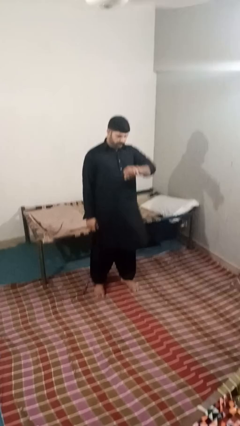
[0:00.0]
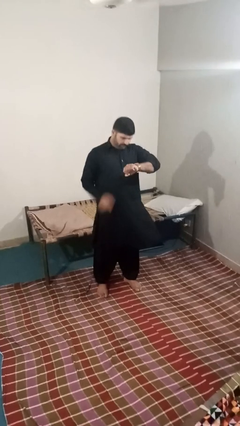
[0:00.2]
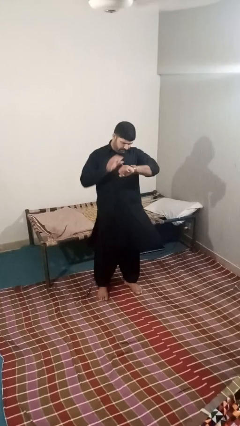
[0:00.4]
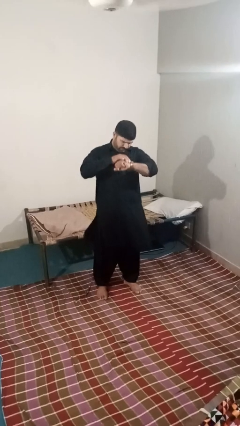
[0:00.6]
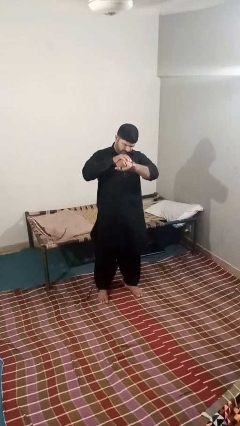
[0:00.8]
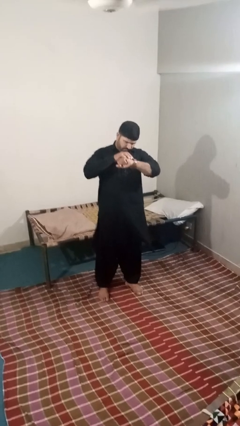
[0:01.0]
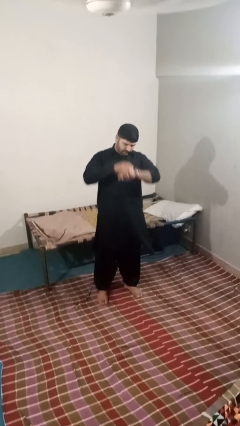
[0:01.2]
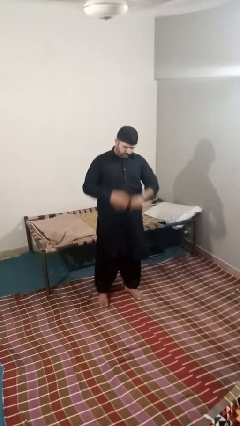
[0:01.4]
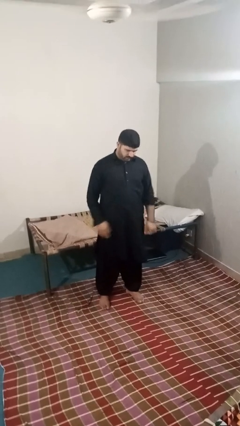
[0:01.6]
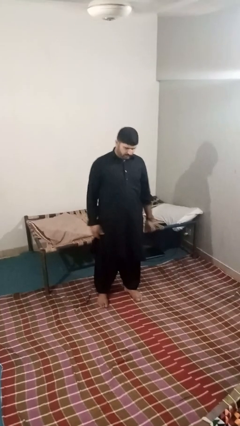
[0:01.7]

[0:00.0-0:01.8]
person looks at wristwatch

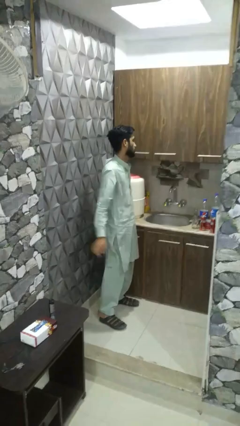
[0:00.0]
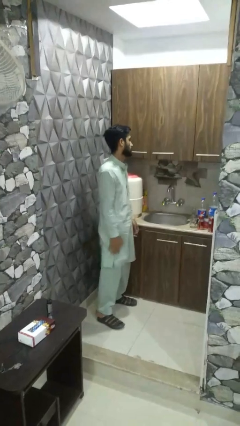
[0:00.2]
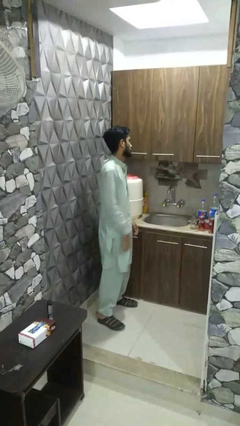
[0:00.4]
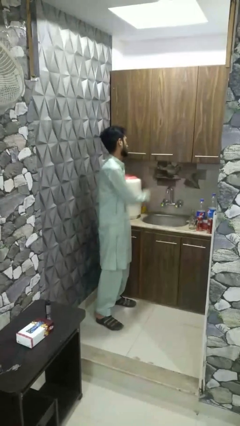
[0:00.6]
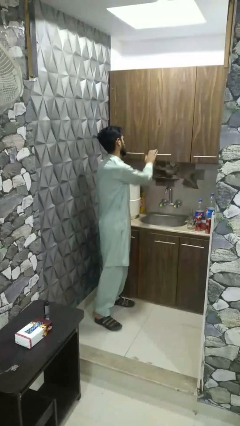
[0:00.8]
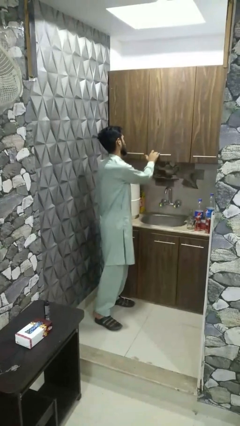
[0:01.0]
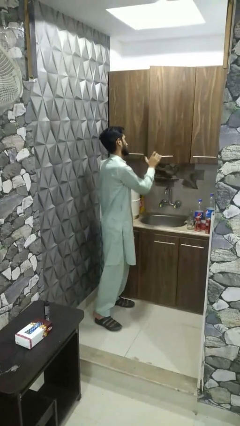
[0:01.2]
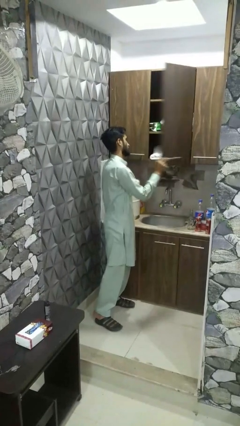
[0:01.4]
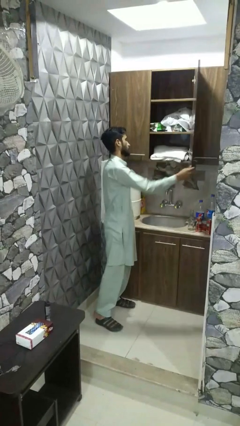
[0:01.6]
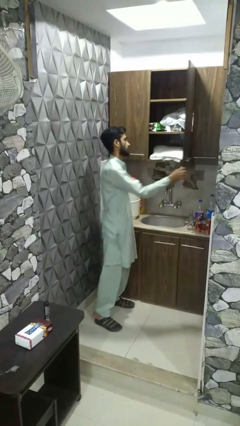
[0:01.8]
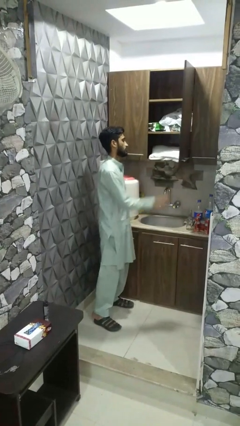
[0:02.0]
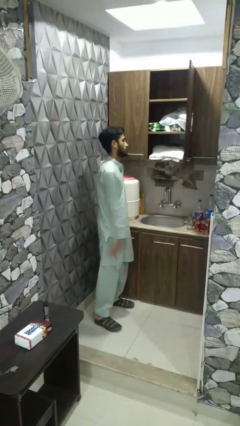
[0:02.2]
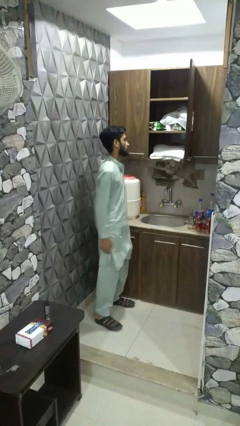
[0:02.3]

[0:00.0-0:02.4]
person opens dresser drawer

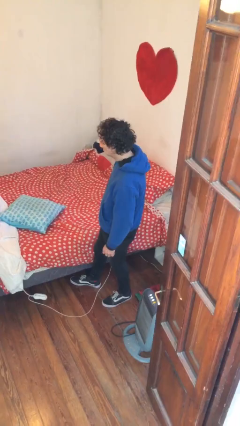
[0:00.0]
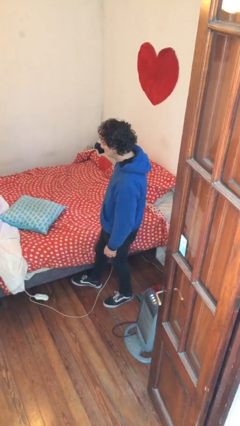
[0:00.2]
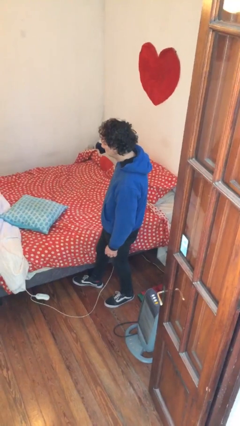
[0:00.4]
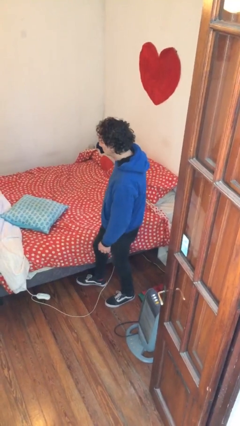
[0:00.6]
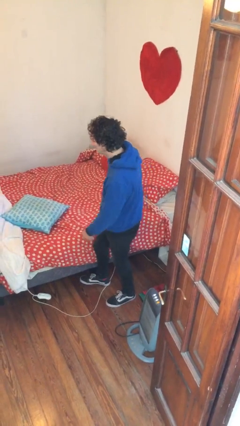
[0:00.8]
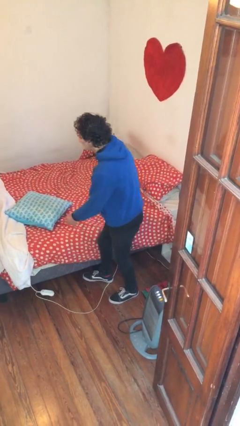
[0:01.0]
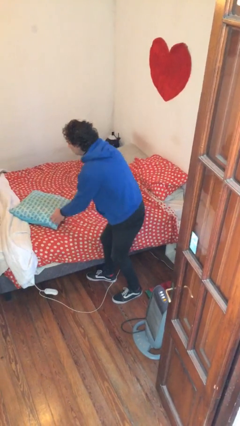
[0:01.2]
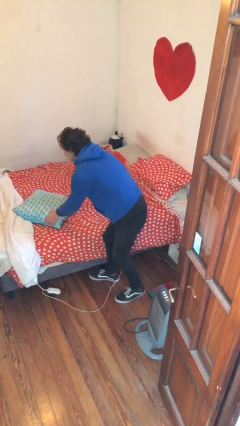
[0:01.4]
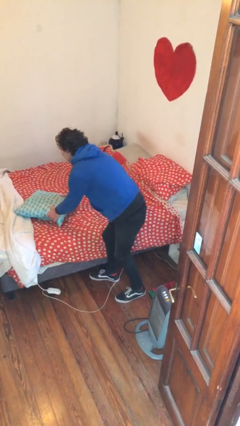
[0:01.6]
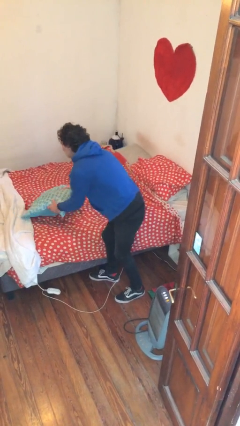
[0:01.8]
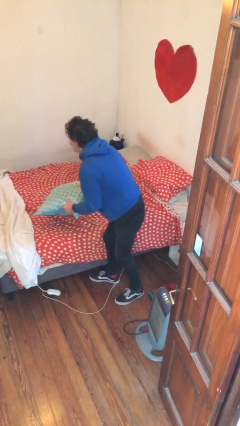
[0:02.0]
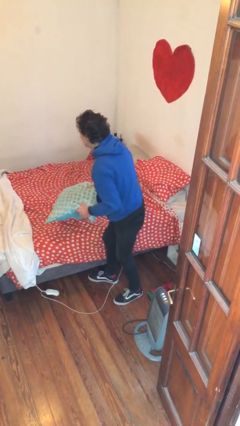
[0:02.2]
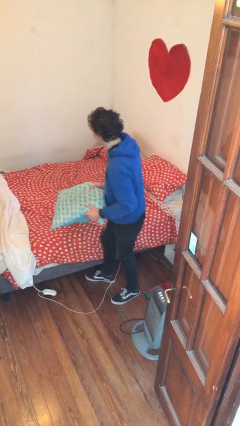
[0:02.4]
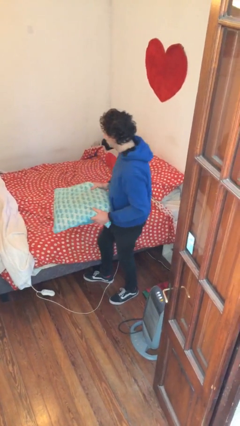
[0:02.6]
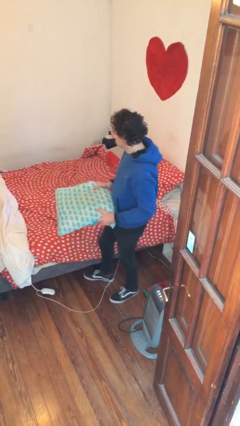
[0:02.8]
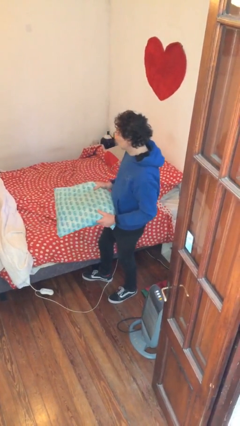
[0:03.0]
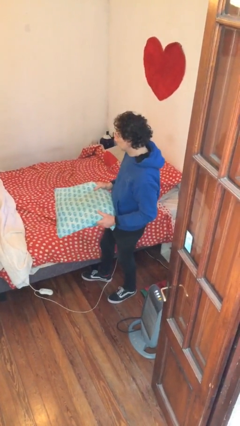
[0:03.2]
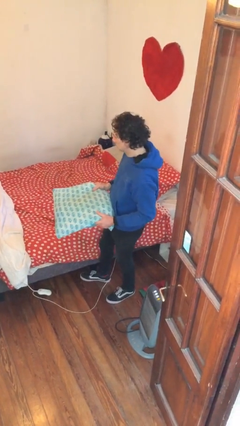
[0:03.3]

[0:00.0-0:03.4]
person picks up object from bed

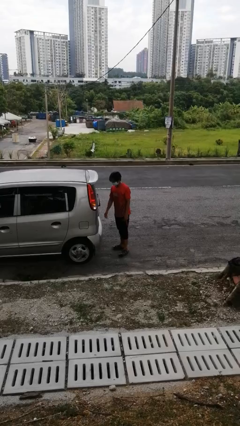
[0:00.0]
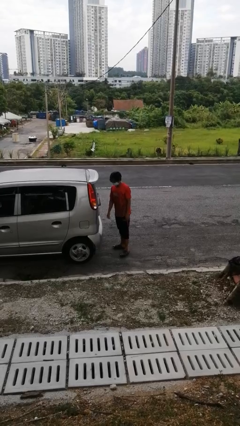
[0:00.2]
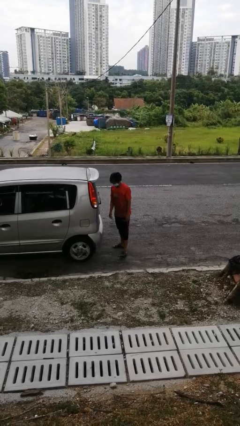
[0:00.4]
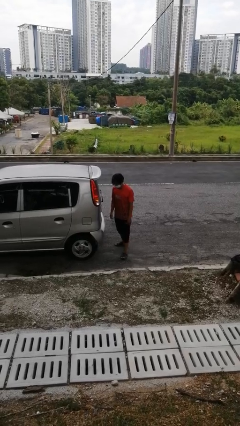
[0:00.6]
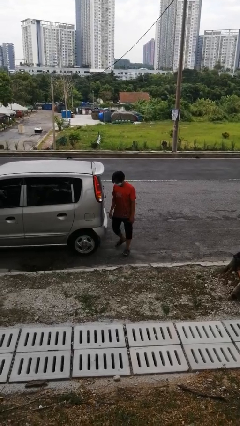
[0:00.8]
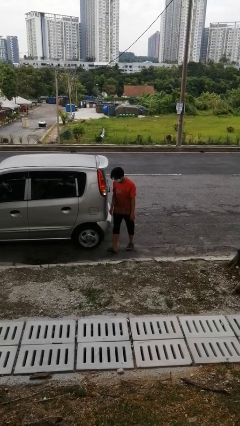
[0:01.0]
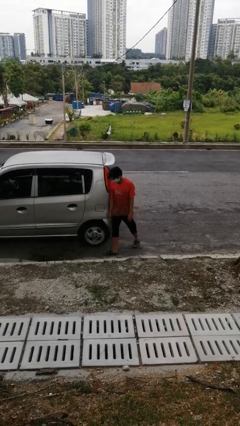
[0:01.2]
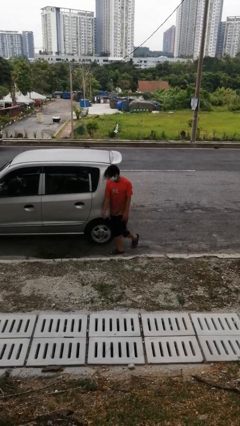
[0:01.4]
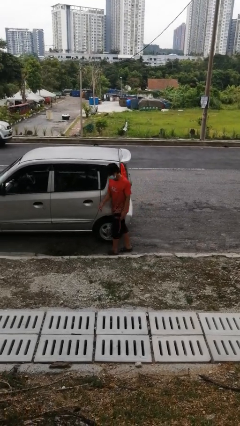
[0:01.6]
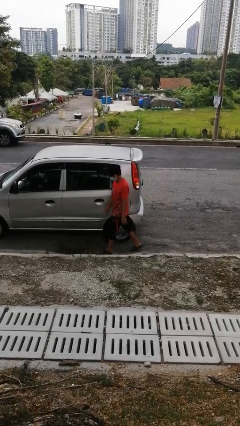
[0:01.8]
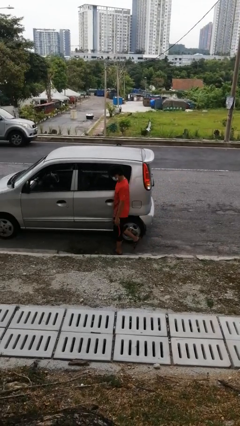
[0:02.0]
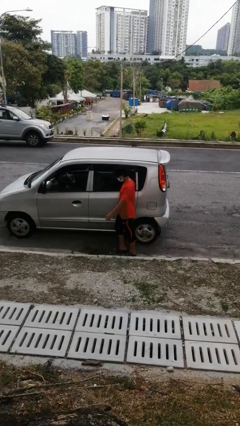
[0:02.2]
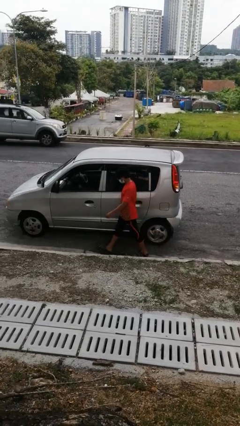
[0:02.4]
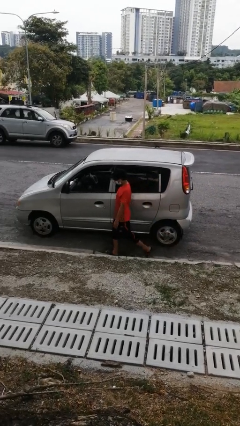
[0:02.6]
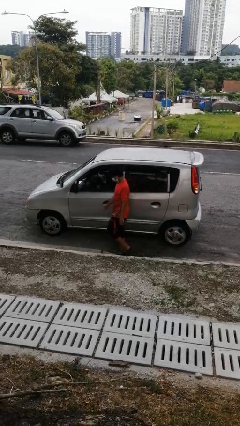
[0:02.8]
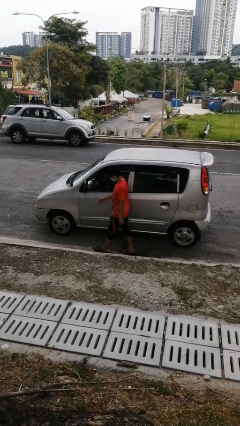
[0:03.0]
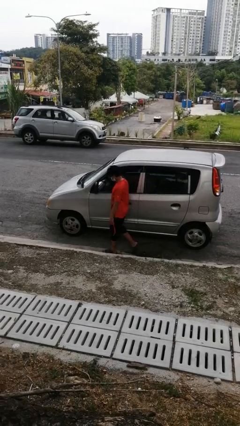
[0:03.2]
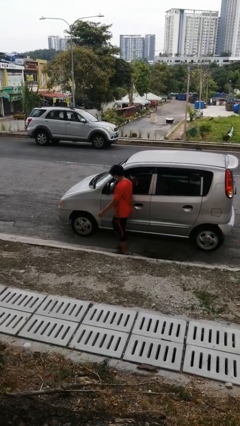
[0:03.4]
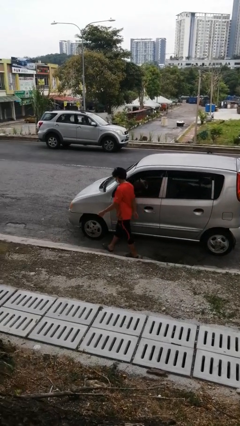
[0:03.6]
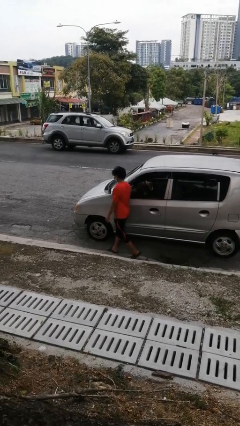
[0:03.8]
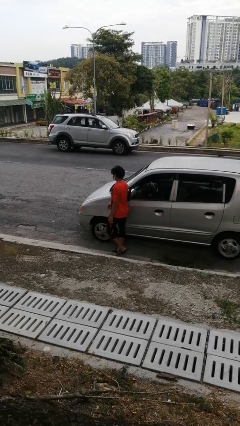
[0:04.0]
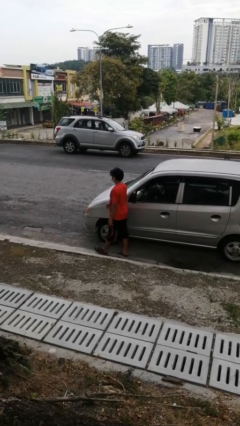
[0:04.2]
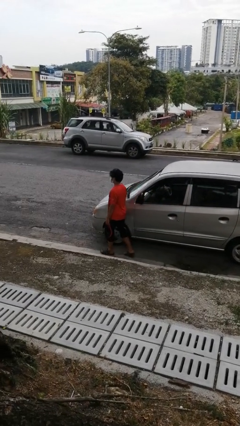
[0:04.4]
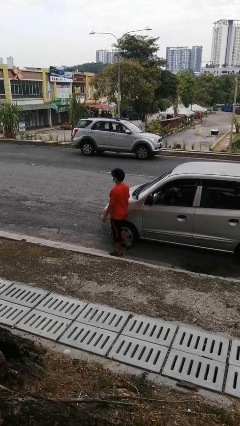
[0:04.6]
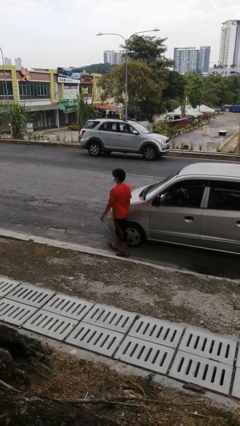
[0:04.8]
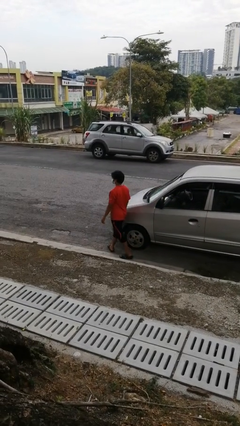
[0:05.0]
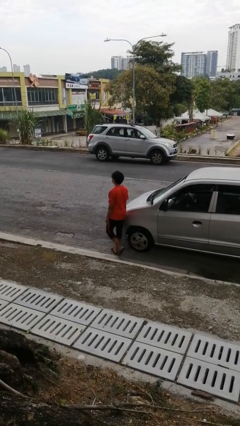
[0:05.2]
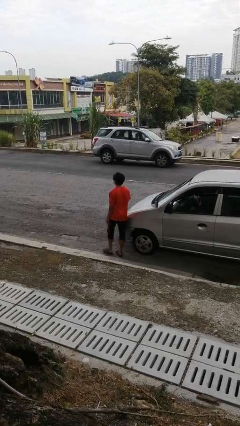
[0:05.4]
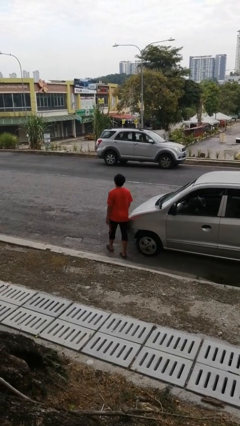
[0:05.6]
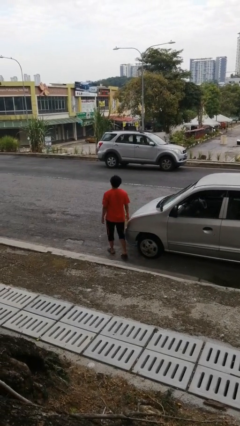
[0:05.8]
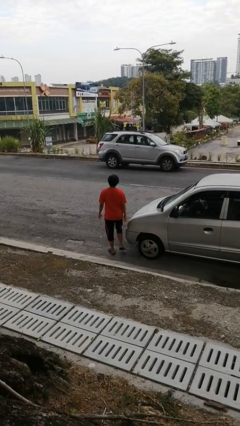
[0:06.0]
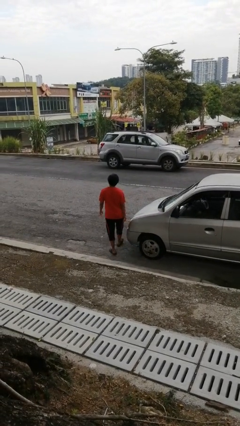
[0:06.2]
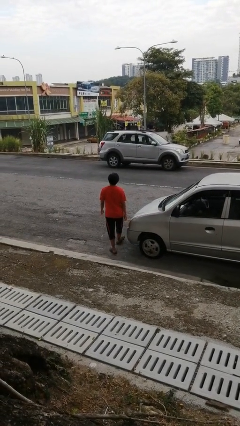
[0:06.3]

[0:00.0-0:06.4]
person walks around car

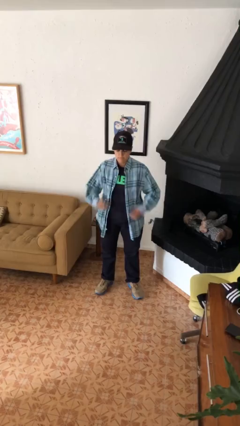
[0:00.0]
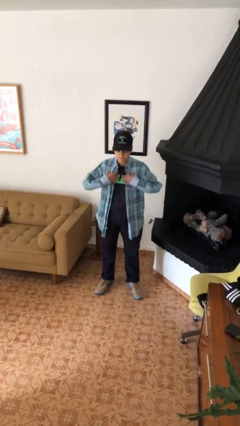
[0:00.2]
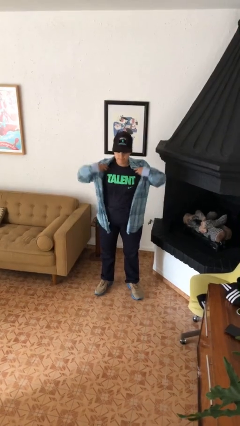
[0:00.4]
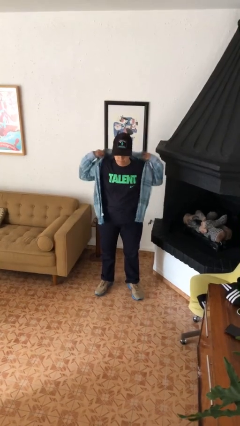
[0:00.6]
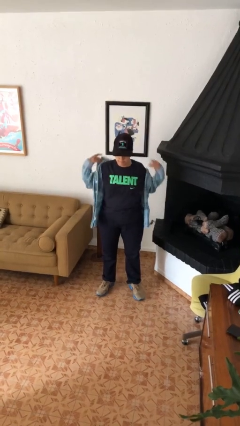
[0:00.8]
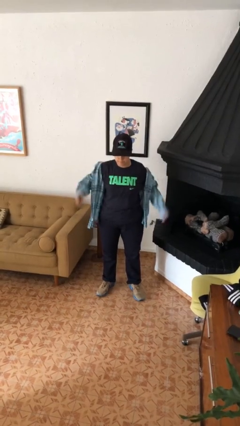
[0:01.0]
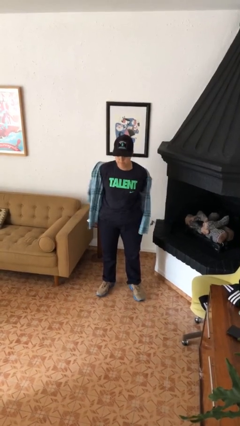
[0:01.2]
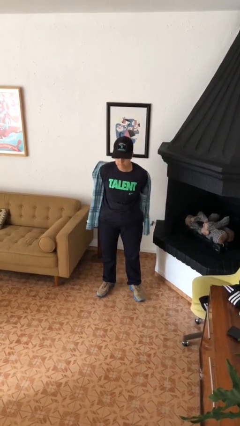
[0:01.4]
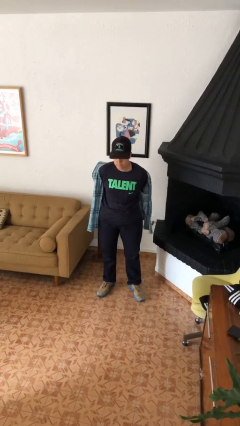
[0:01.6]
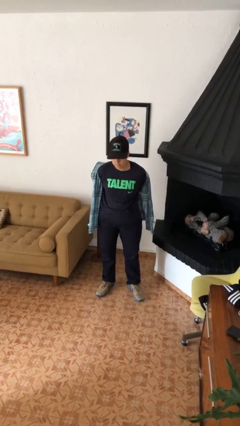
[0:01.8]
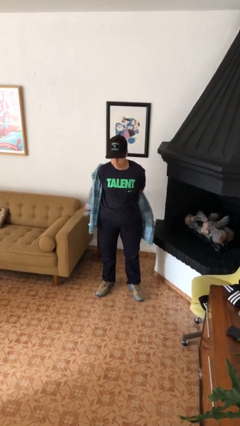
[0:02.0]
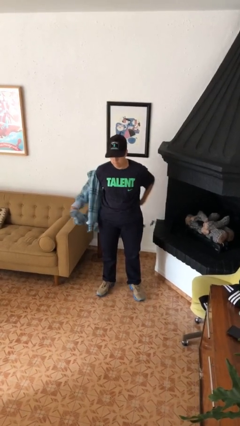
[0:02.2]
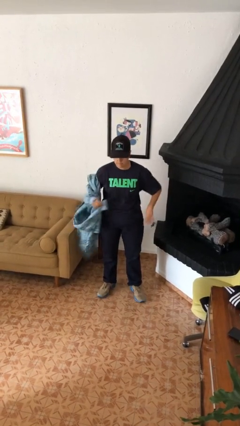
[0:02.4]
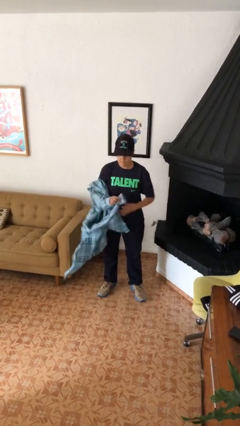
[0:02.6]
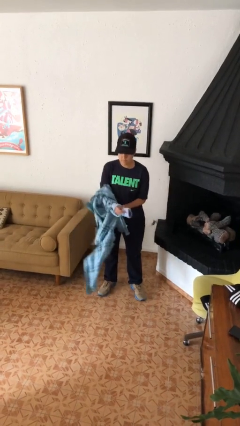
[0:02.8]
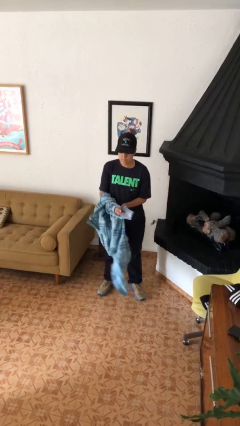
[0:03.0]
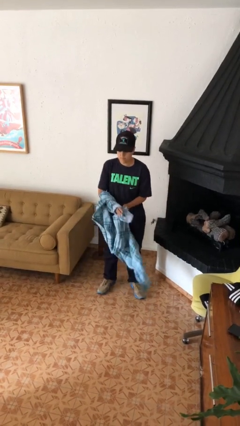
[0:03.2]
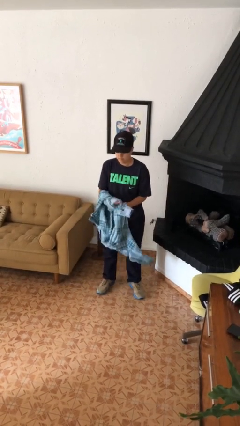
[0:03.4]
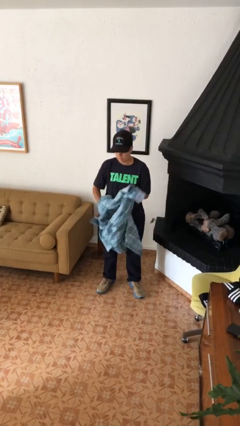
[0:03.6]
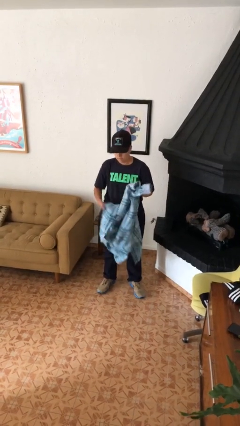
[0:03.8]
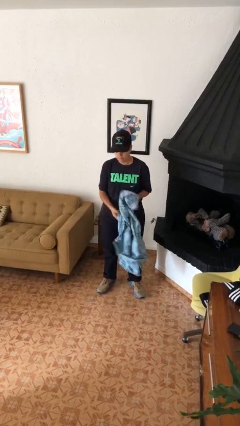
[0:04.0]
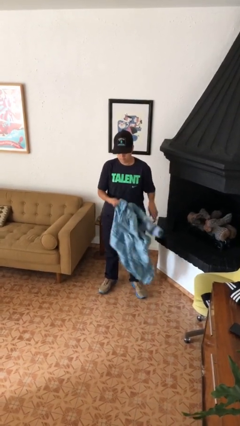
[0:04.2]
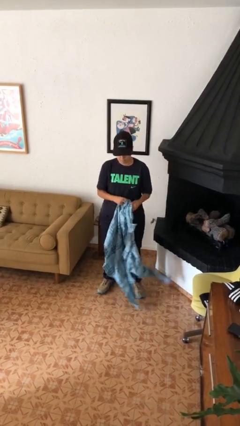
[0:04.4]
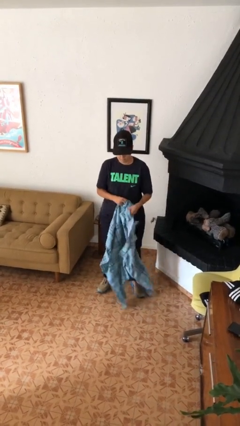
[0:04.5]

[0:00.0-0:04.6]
person takes off shirt
